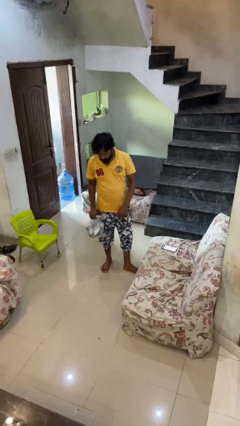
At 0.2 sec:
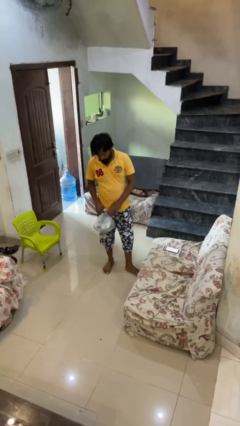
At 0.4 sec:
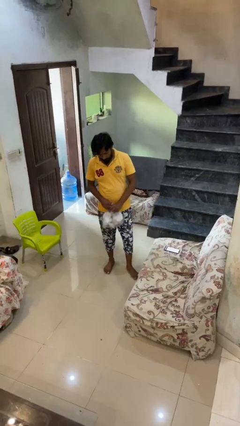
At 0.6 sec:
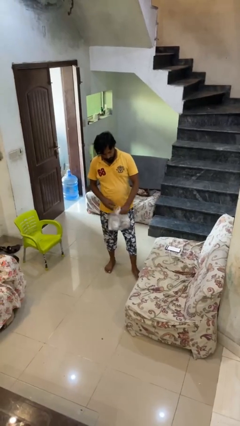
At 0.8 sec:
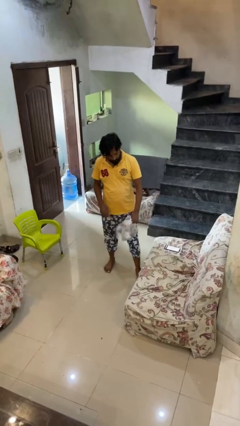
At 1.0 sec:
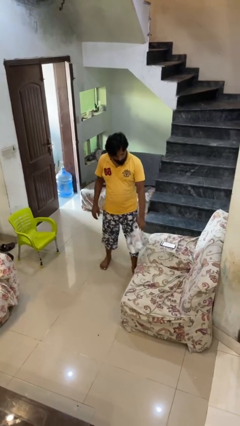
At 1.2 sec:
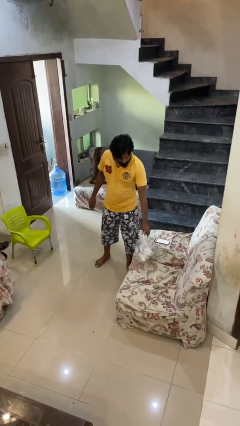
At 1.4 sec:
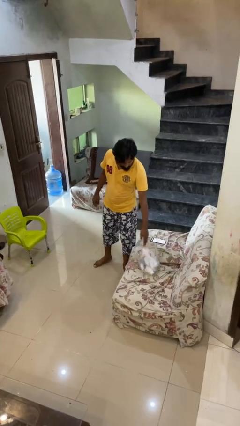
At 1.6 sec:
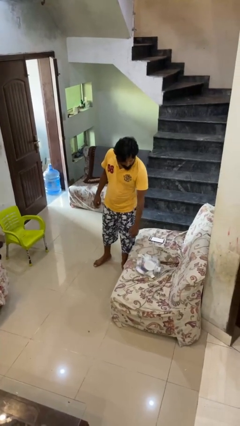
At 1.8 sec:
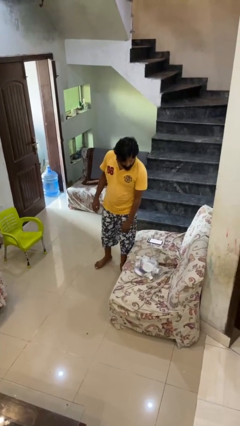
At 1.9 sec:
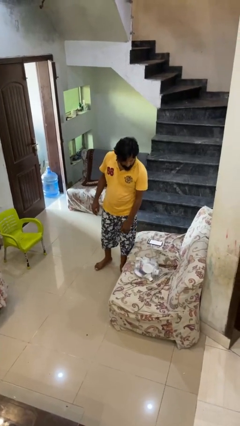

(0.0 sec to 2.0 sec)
person puts down object on couch

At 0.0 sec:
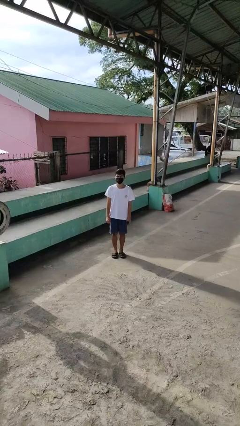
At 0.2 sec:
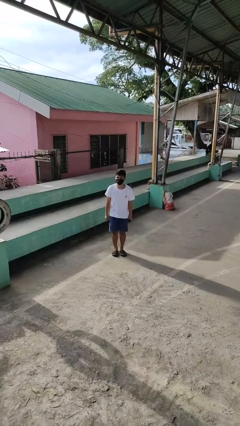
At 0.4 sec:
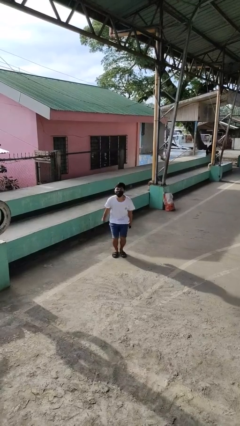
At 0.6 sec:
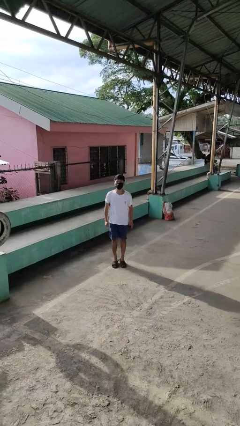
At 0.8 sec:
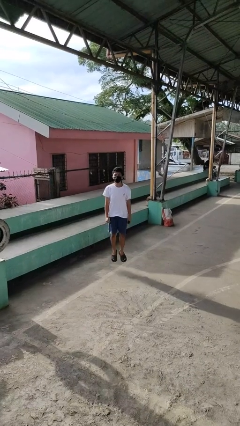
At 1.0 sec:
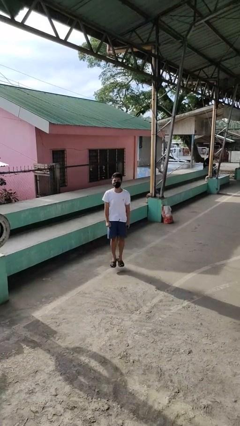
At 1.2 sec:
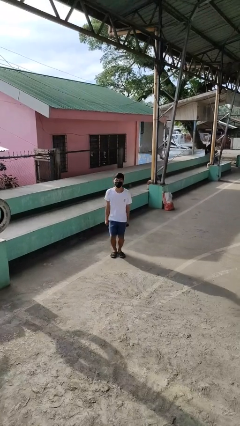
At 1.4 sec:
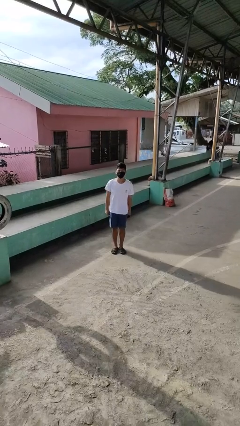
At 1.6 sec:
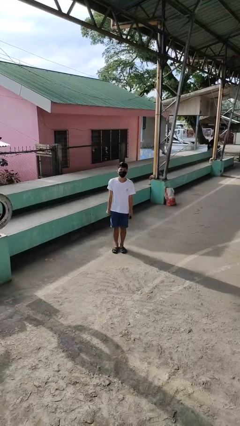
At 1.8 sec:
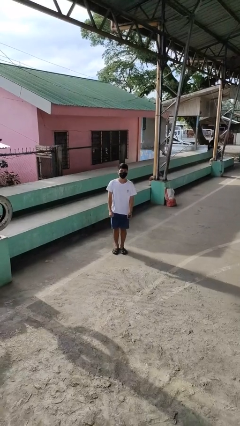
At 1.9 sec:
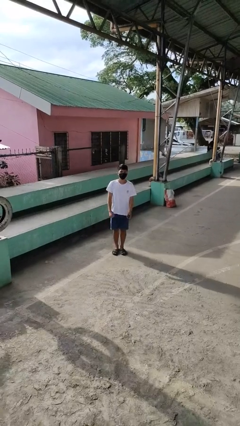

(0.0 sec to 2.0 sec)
person jumps

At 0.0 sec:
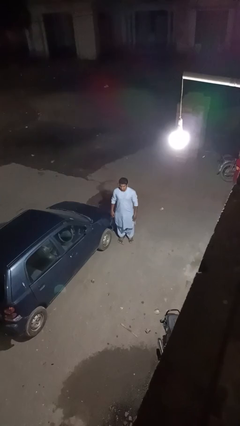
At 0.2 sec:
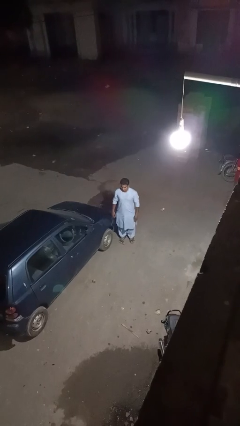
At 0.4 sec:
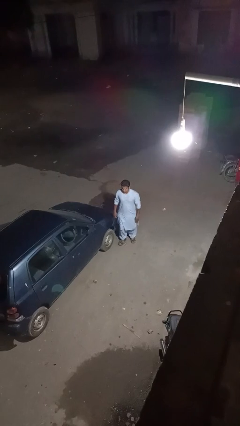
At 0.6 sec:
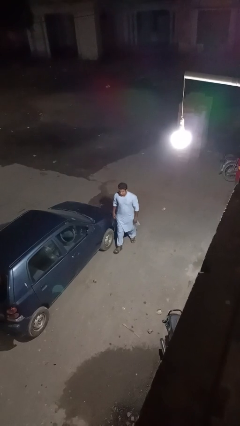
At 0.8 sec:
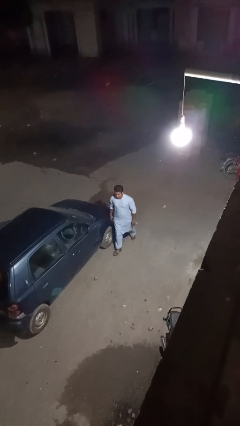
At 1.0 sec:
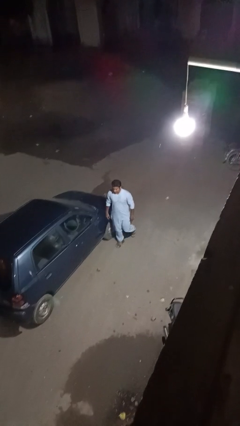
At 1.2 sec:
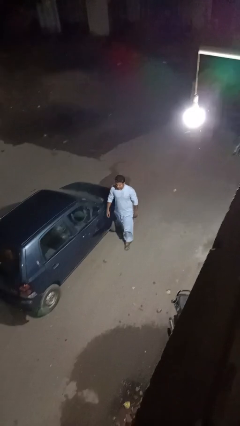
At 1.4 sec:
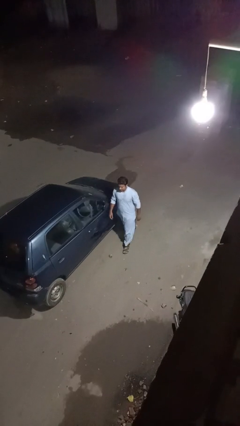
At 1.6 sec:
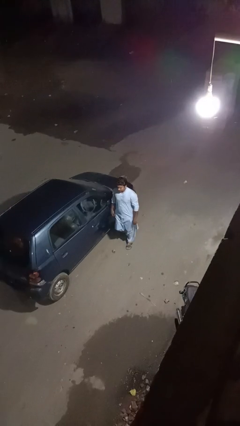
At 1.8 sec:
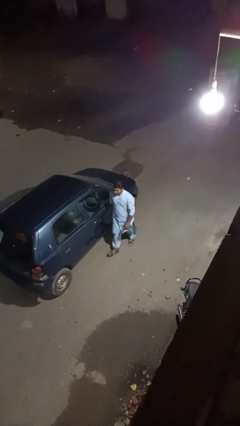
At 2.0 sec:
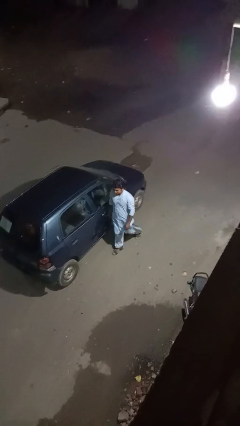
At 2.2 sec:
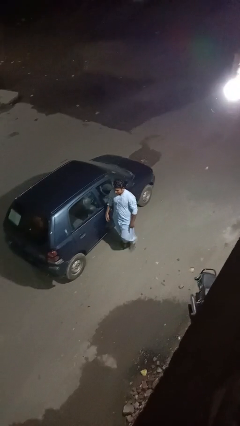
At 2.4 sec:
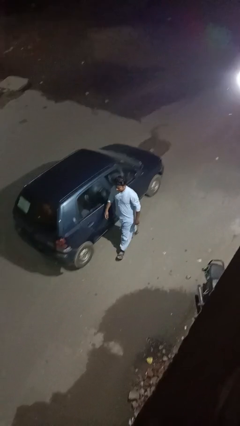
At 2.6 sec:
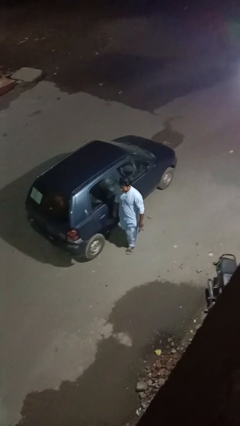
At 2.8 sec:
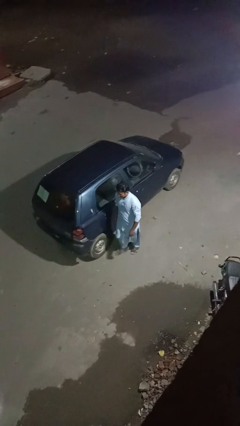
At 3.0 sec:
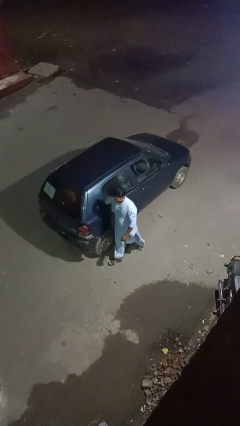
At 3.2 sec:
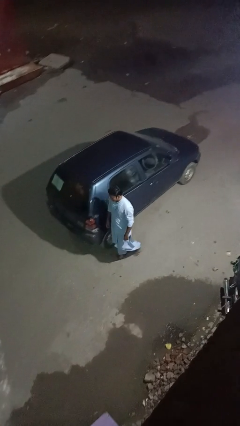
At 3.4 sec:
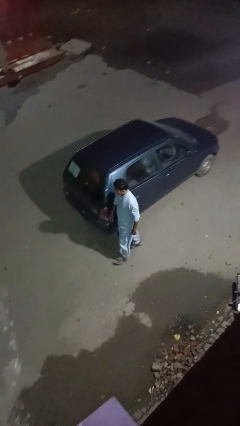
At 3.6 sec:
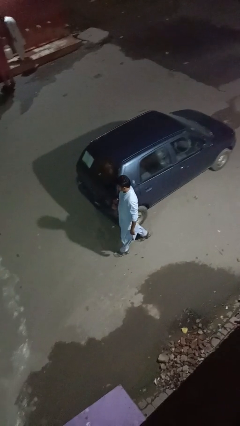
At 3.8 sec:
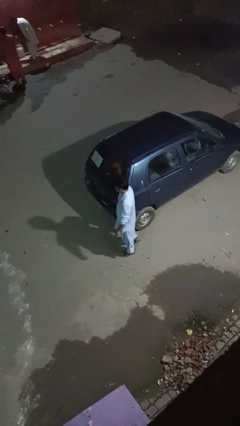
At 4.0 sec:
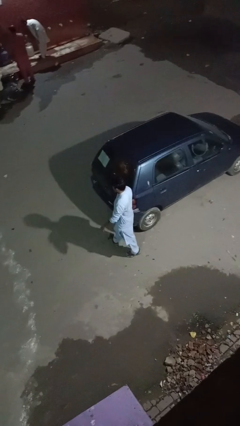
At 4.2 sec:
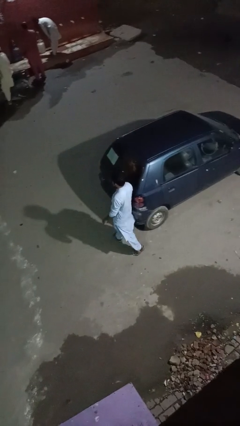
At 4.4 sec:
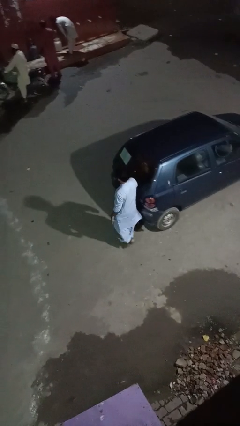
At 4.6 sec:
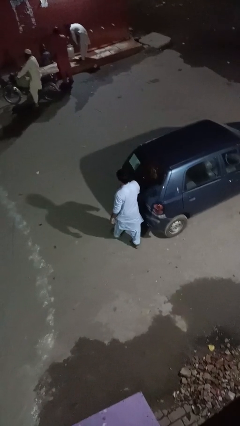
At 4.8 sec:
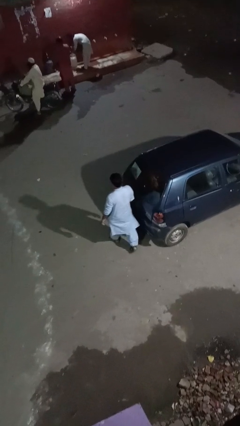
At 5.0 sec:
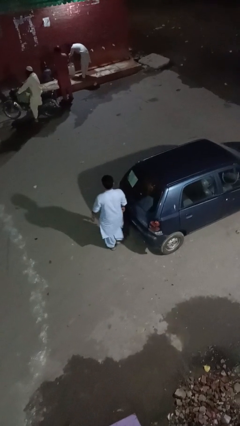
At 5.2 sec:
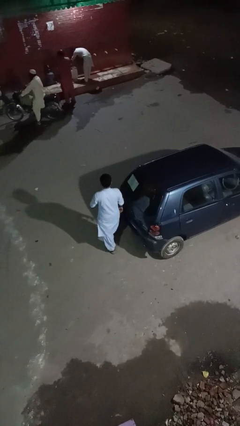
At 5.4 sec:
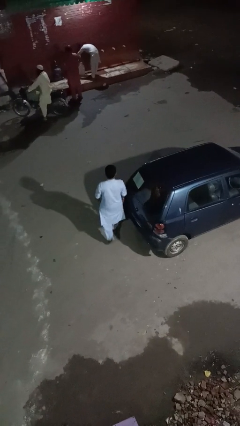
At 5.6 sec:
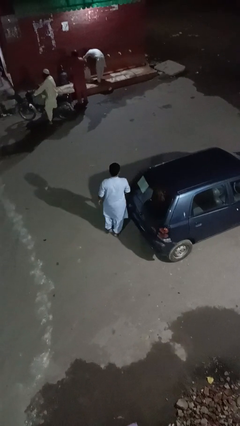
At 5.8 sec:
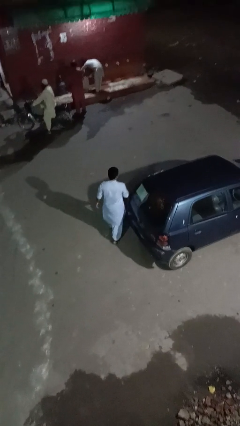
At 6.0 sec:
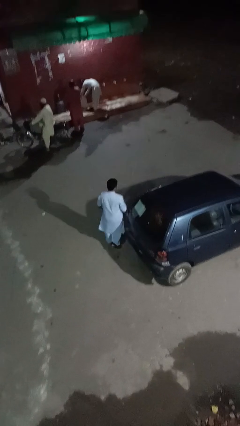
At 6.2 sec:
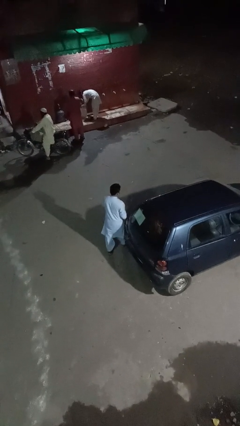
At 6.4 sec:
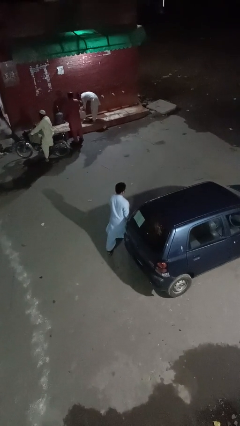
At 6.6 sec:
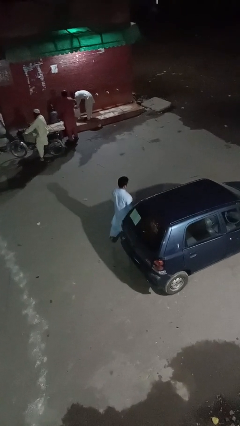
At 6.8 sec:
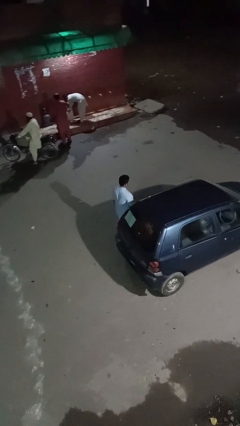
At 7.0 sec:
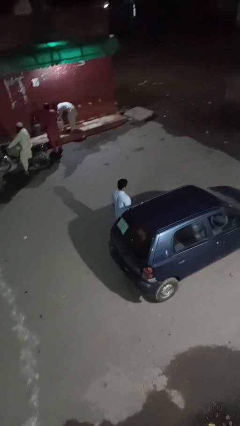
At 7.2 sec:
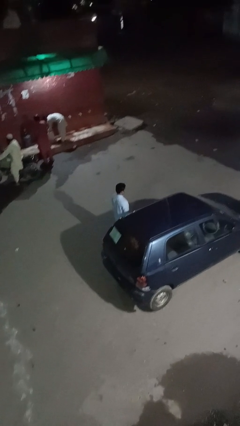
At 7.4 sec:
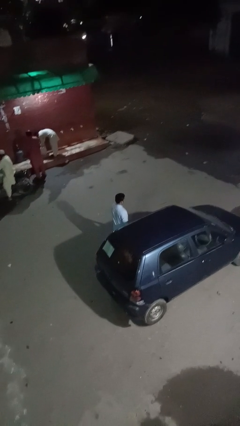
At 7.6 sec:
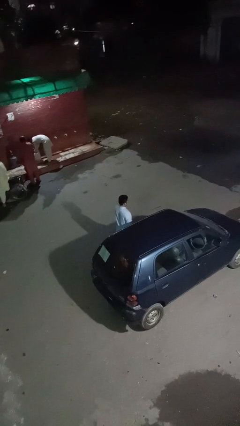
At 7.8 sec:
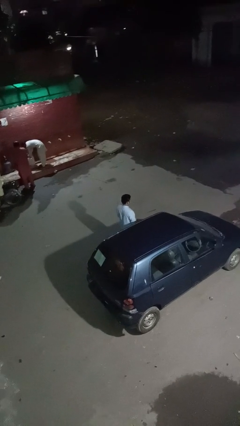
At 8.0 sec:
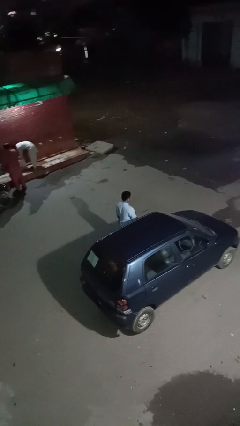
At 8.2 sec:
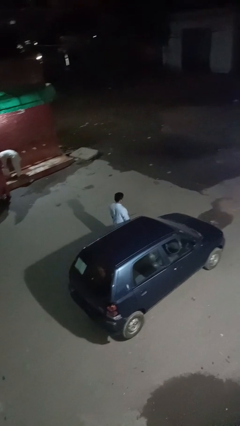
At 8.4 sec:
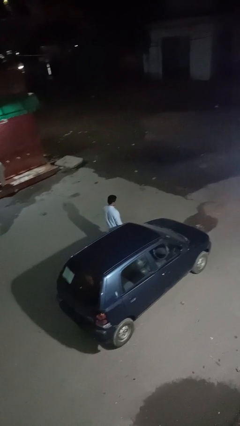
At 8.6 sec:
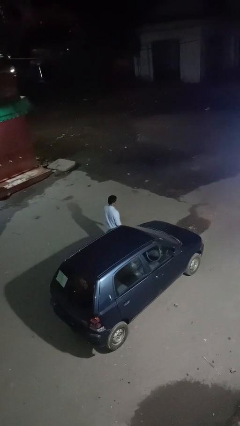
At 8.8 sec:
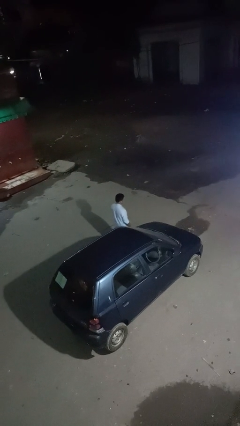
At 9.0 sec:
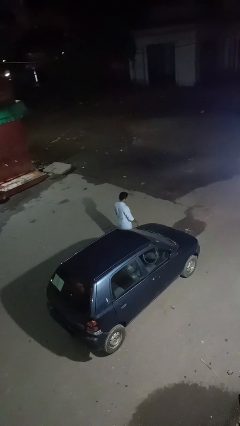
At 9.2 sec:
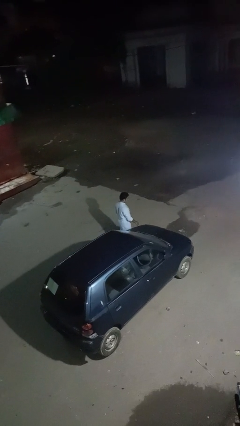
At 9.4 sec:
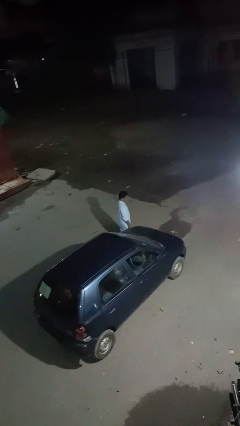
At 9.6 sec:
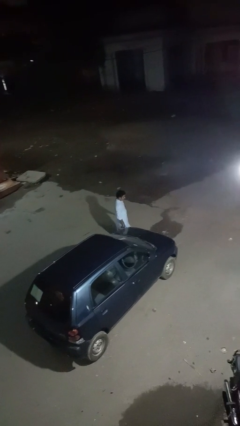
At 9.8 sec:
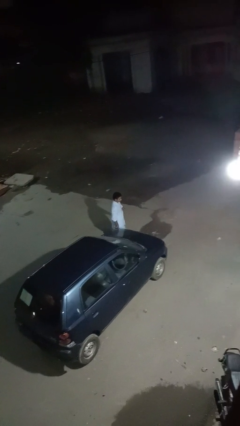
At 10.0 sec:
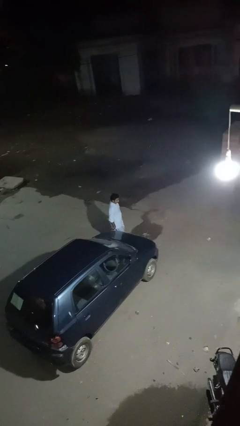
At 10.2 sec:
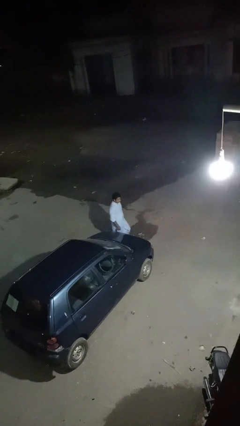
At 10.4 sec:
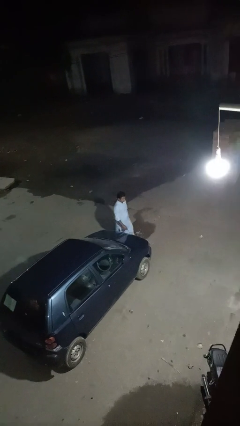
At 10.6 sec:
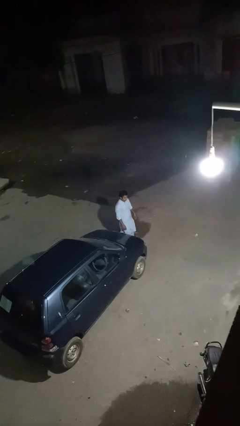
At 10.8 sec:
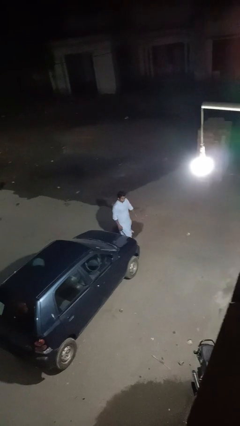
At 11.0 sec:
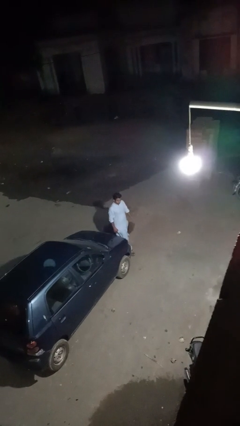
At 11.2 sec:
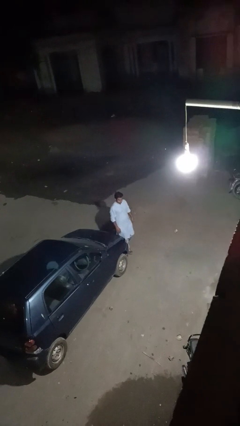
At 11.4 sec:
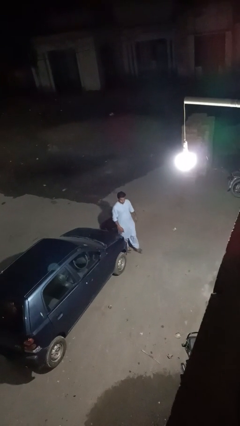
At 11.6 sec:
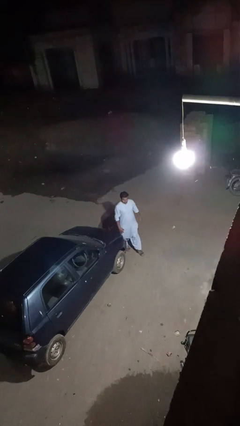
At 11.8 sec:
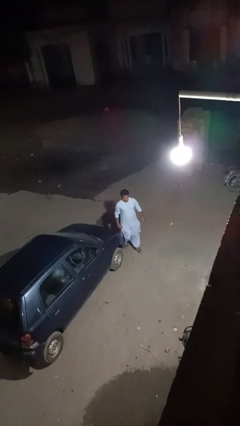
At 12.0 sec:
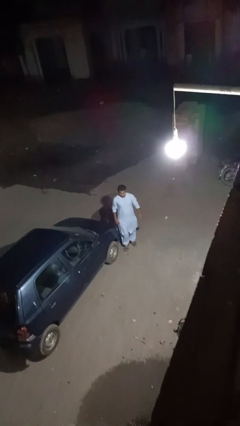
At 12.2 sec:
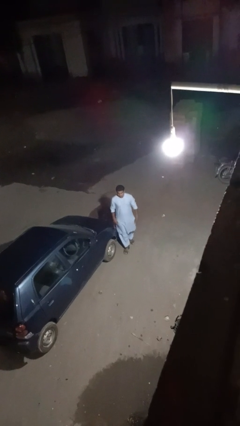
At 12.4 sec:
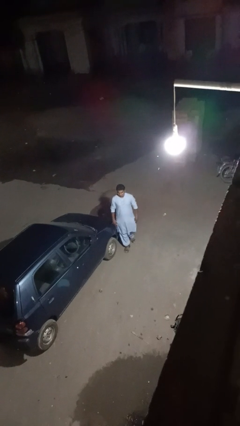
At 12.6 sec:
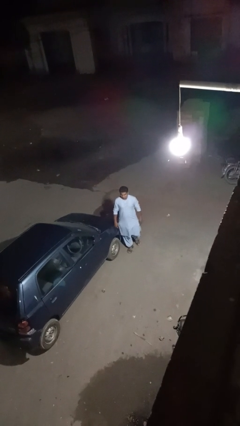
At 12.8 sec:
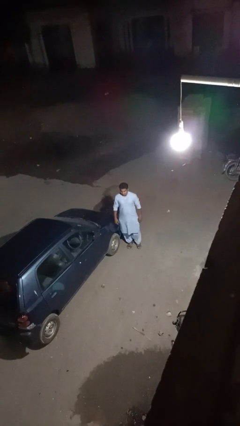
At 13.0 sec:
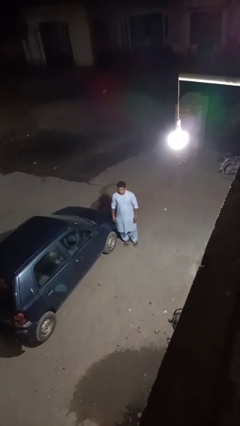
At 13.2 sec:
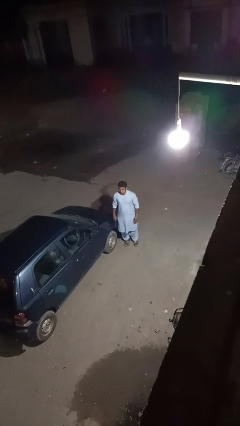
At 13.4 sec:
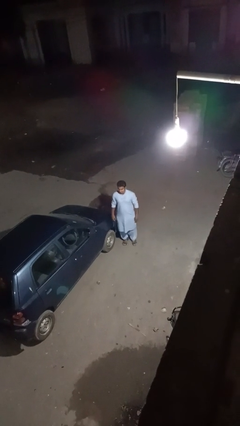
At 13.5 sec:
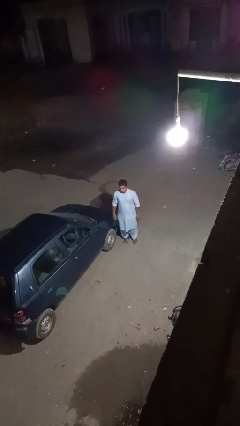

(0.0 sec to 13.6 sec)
person walks around car

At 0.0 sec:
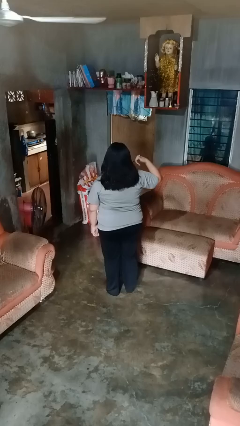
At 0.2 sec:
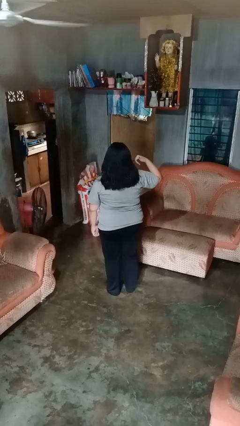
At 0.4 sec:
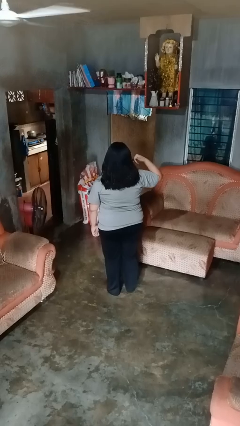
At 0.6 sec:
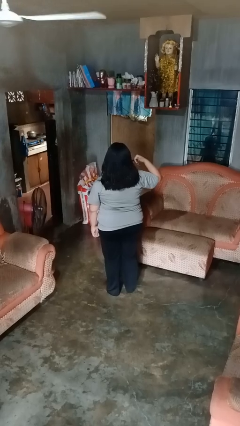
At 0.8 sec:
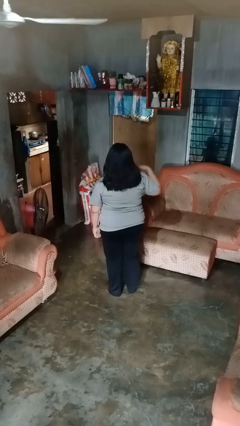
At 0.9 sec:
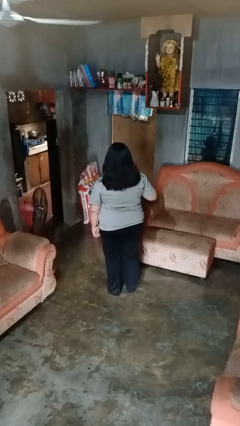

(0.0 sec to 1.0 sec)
person gestures call me
